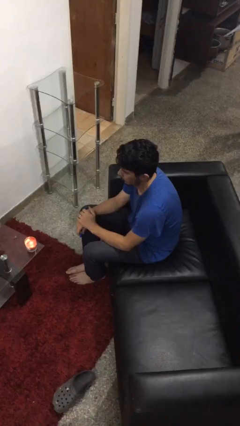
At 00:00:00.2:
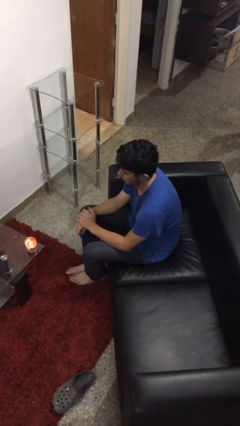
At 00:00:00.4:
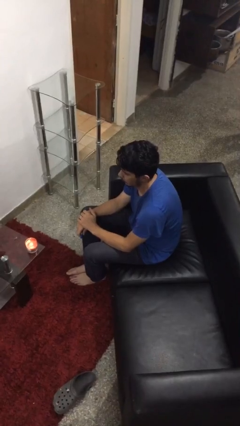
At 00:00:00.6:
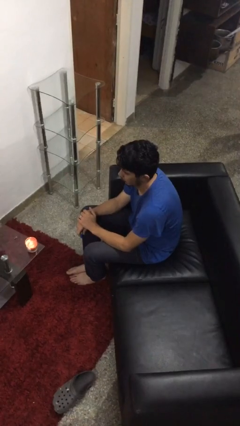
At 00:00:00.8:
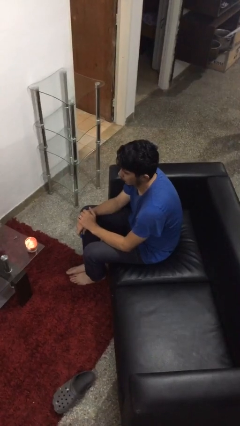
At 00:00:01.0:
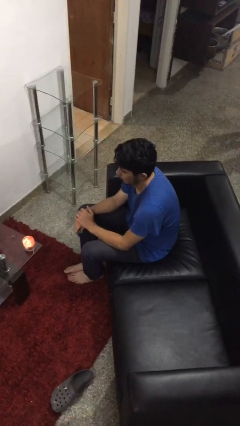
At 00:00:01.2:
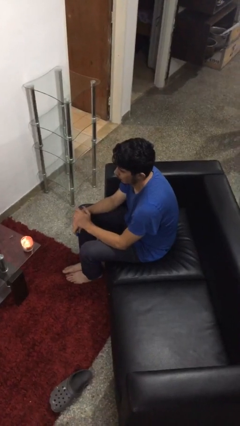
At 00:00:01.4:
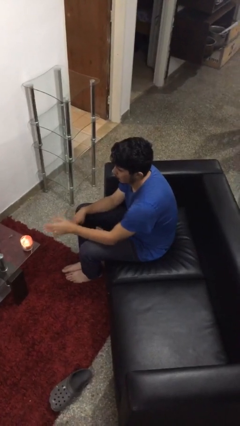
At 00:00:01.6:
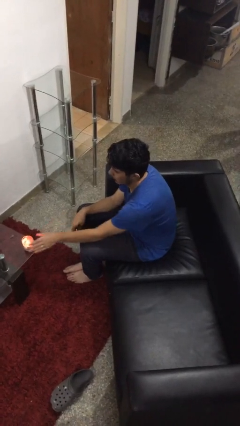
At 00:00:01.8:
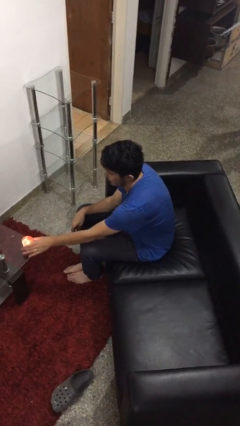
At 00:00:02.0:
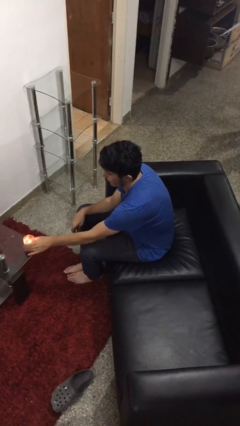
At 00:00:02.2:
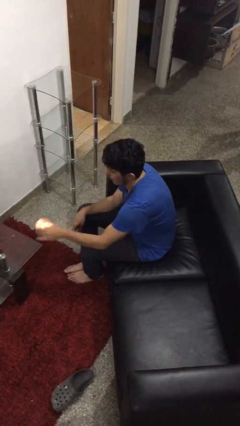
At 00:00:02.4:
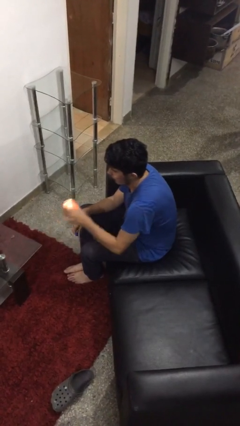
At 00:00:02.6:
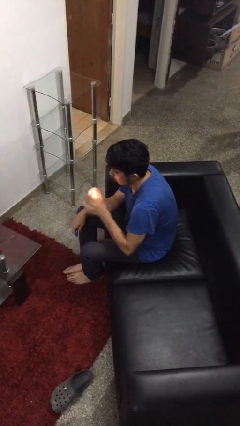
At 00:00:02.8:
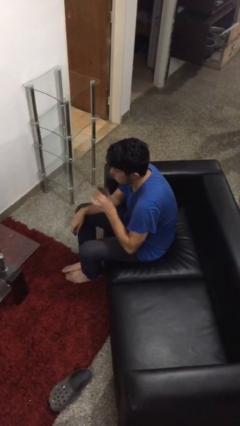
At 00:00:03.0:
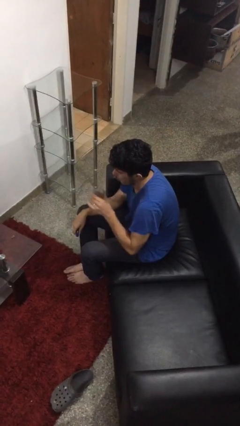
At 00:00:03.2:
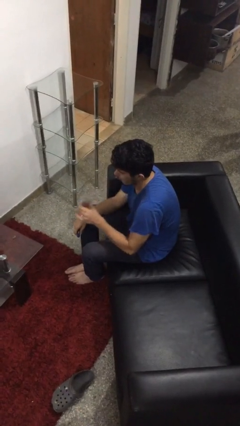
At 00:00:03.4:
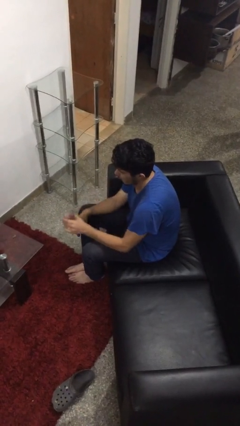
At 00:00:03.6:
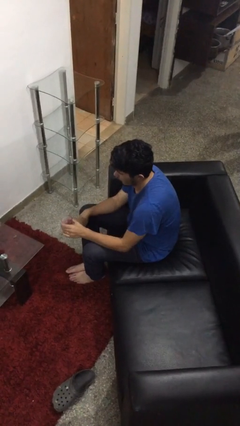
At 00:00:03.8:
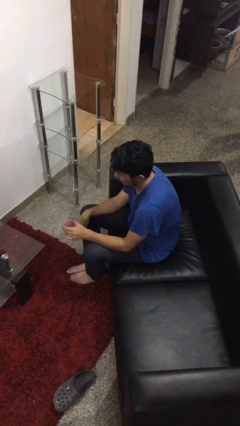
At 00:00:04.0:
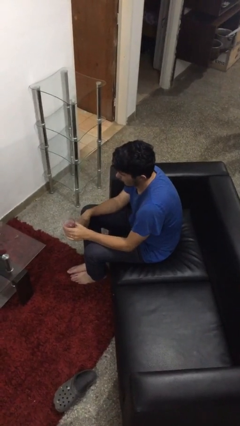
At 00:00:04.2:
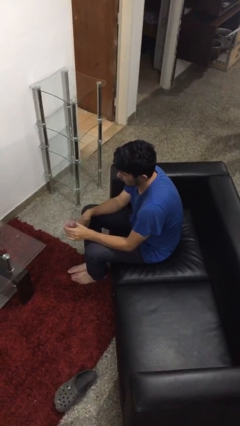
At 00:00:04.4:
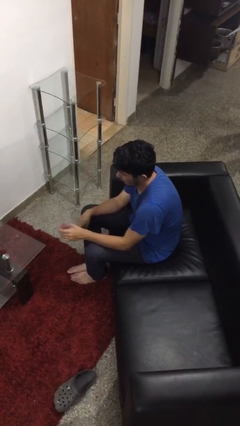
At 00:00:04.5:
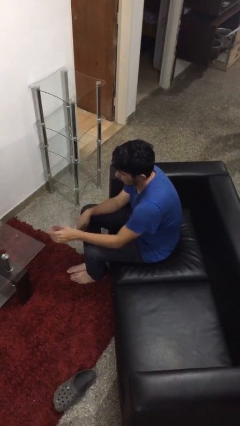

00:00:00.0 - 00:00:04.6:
person extinguishes candle

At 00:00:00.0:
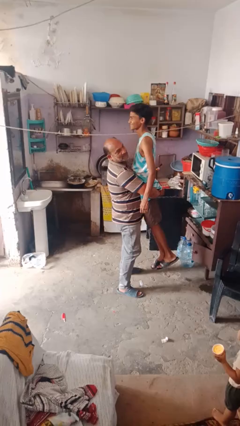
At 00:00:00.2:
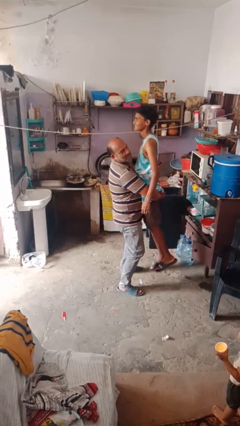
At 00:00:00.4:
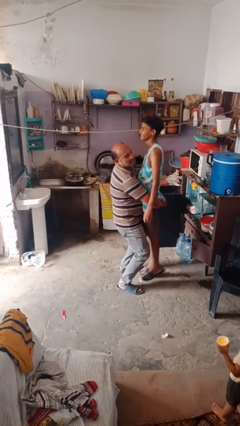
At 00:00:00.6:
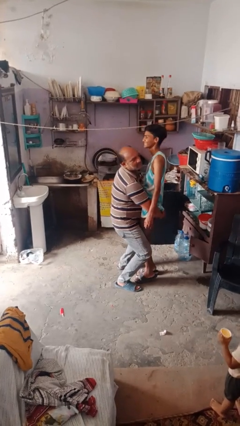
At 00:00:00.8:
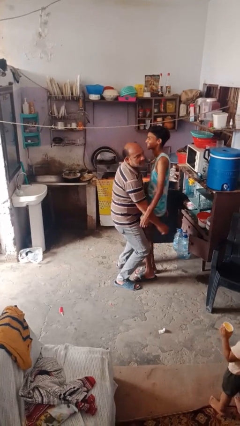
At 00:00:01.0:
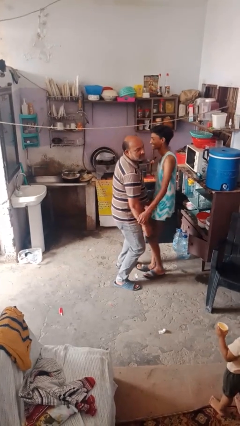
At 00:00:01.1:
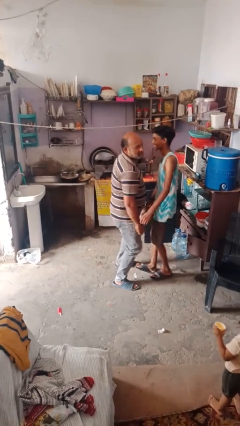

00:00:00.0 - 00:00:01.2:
person puts down person

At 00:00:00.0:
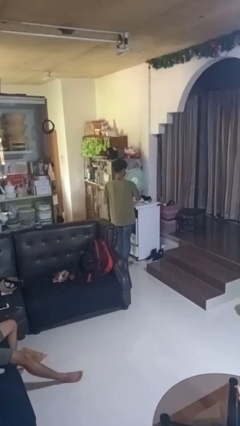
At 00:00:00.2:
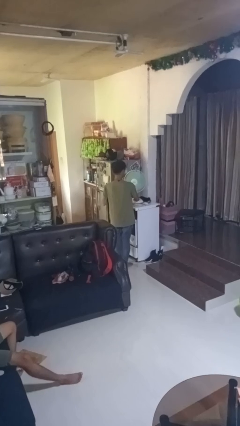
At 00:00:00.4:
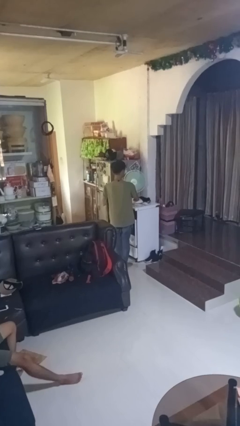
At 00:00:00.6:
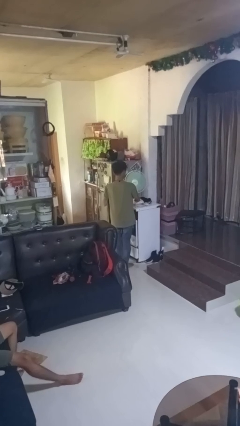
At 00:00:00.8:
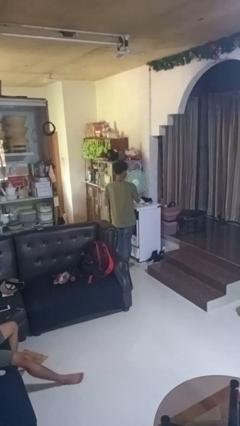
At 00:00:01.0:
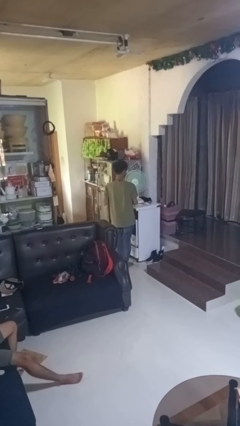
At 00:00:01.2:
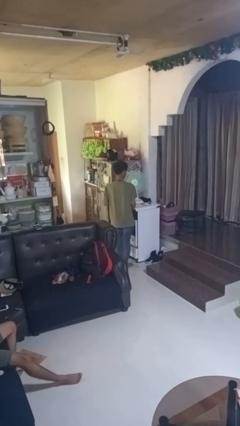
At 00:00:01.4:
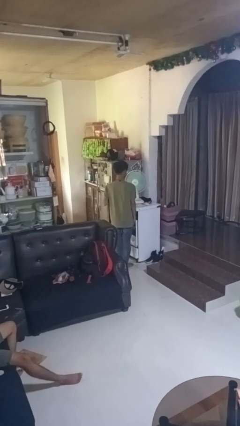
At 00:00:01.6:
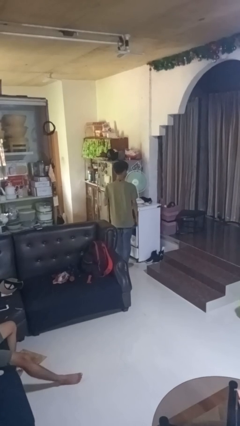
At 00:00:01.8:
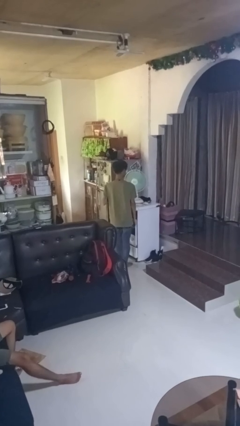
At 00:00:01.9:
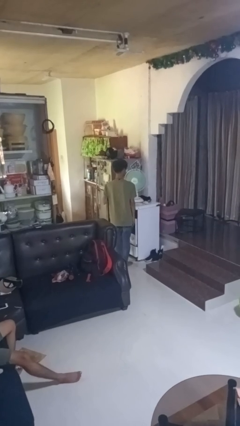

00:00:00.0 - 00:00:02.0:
person turns off fan

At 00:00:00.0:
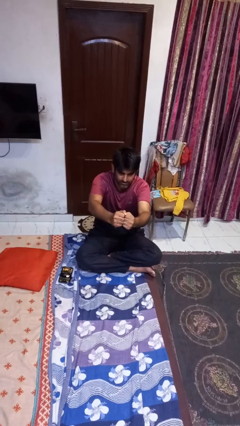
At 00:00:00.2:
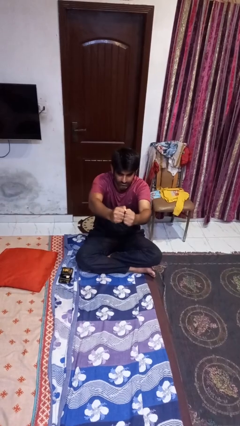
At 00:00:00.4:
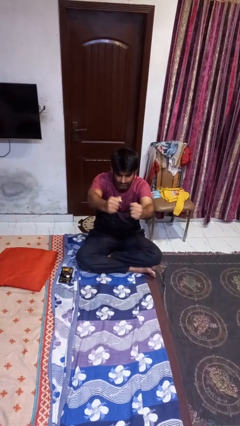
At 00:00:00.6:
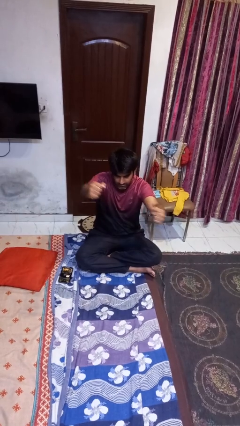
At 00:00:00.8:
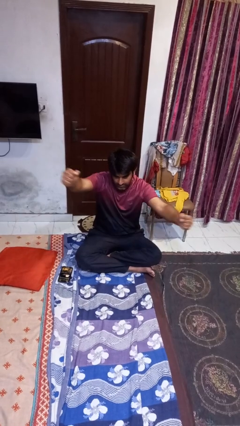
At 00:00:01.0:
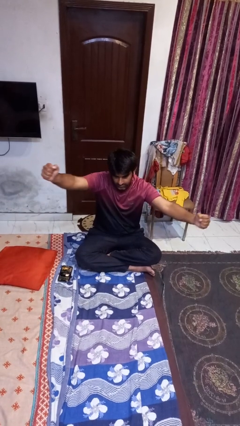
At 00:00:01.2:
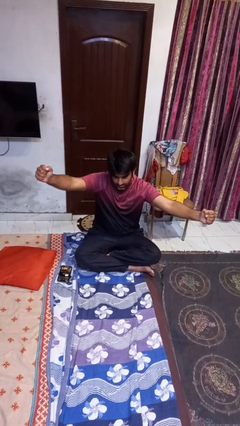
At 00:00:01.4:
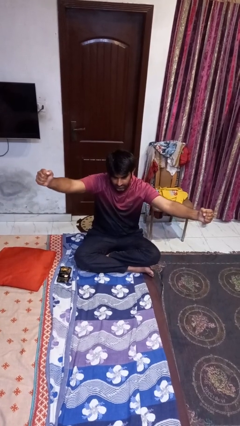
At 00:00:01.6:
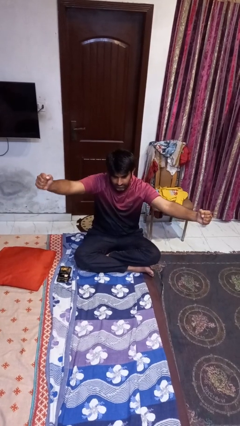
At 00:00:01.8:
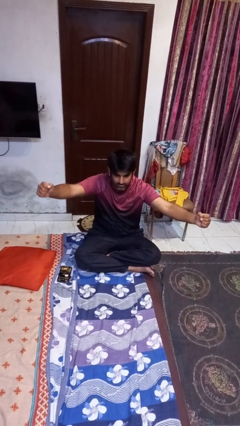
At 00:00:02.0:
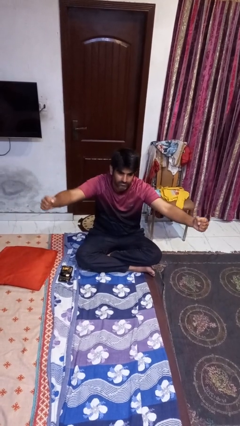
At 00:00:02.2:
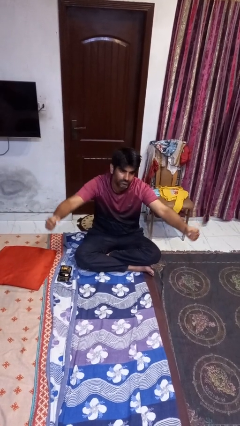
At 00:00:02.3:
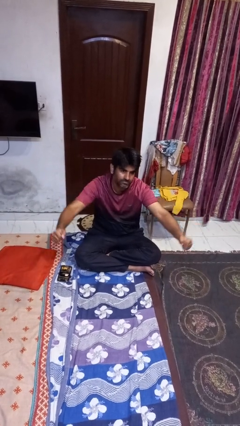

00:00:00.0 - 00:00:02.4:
person gestures zoom out

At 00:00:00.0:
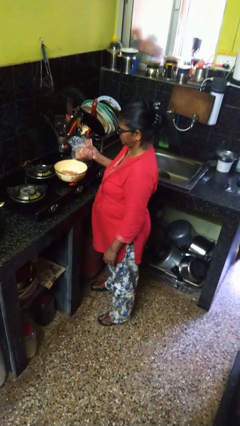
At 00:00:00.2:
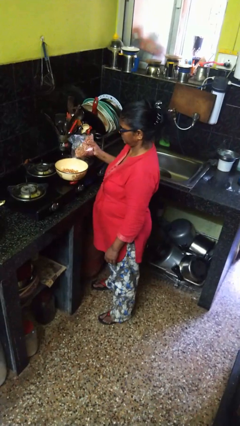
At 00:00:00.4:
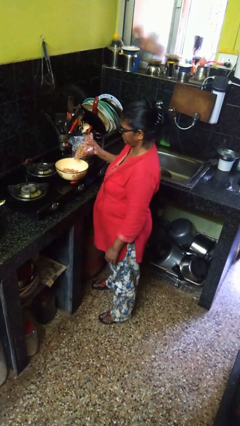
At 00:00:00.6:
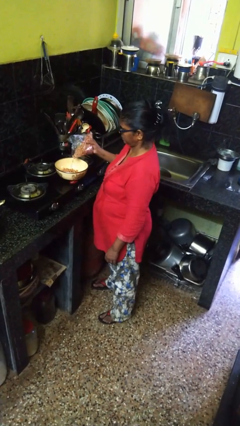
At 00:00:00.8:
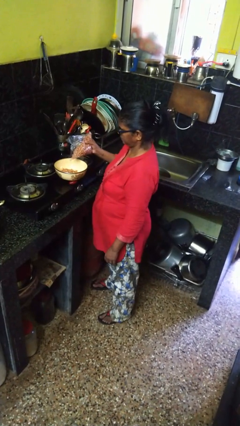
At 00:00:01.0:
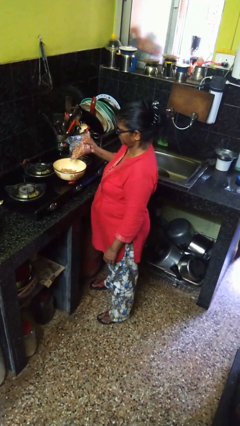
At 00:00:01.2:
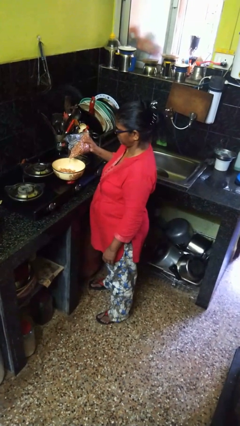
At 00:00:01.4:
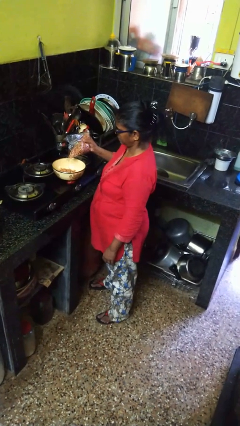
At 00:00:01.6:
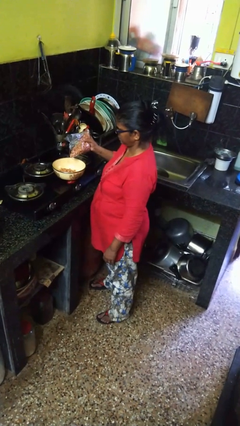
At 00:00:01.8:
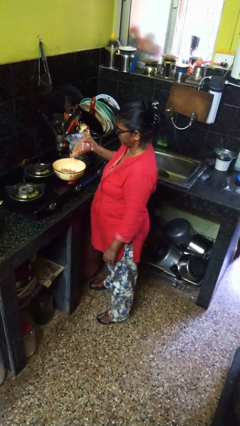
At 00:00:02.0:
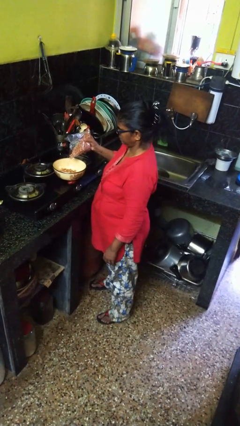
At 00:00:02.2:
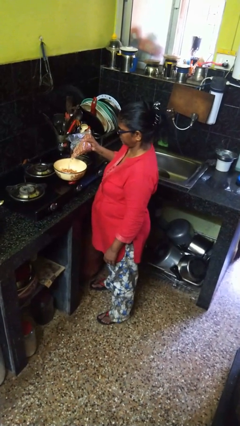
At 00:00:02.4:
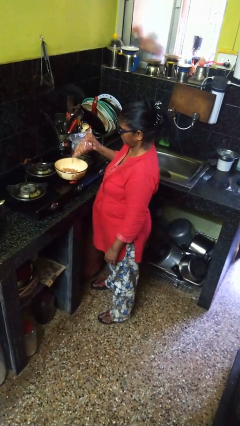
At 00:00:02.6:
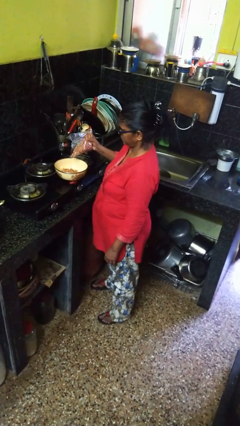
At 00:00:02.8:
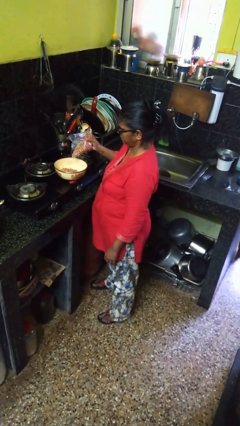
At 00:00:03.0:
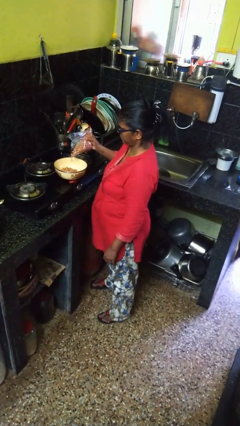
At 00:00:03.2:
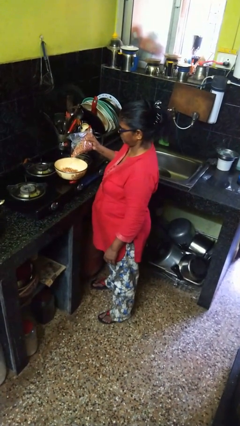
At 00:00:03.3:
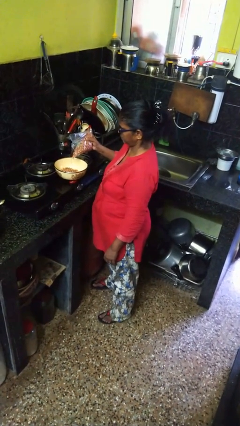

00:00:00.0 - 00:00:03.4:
person pours into bowl

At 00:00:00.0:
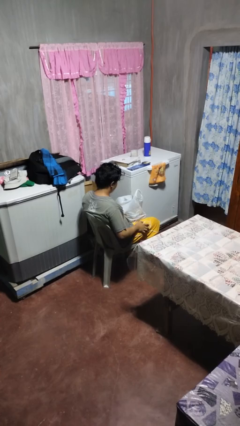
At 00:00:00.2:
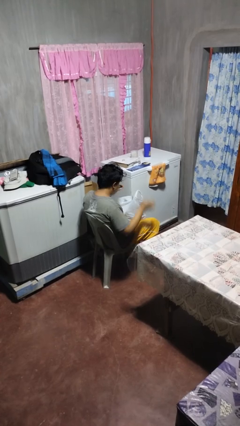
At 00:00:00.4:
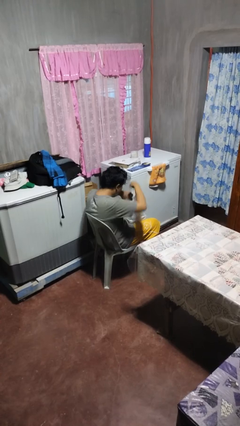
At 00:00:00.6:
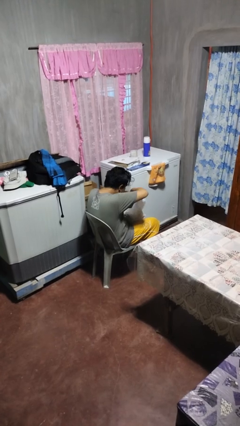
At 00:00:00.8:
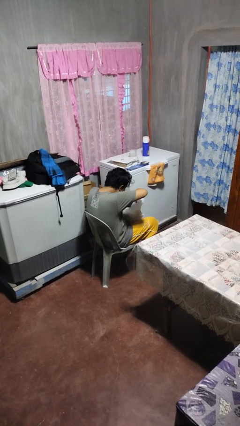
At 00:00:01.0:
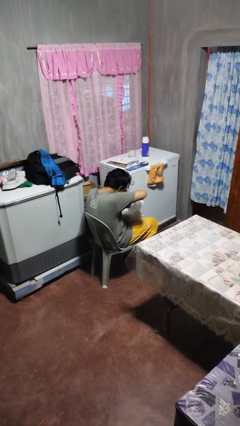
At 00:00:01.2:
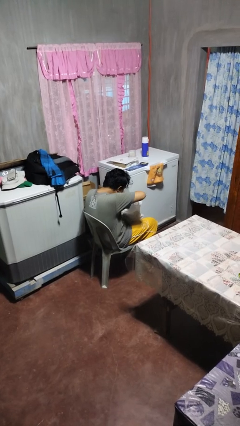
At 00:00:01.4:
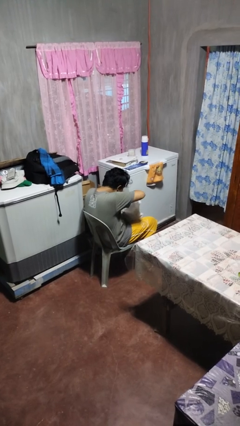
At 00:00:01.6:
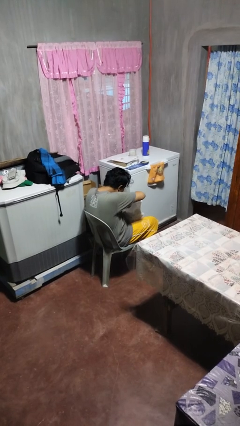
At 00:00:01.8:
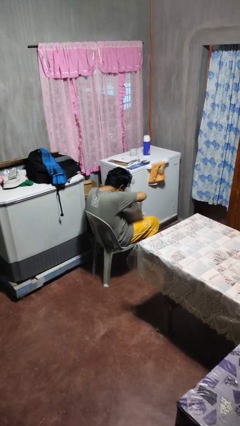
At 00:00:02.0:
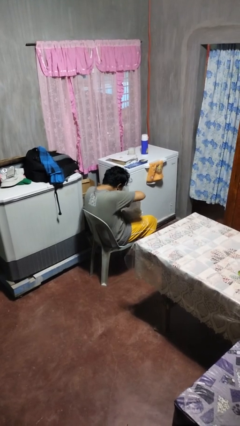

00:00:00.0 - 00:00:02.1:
person searches in bag

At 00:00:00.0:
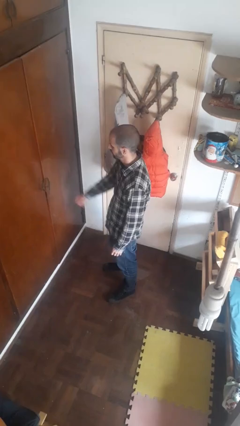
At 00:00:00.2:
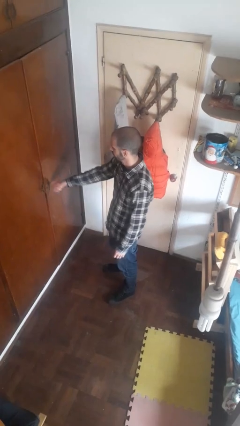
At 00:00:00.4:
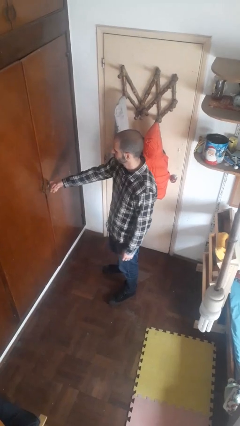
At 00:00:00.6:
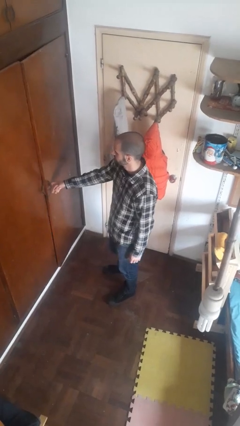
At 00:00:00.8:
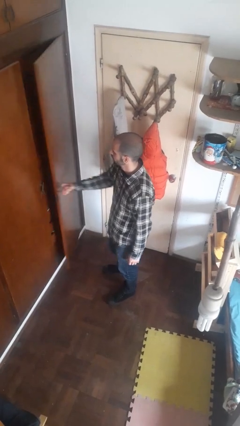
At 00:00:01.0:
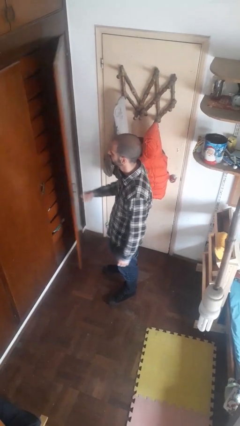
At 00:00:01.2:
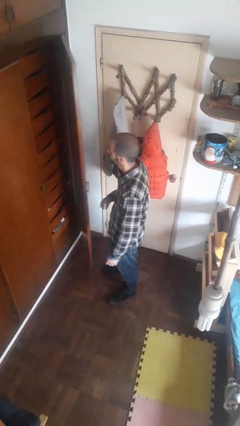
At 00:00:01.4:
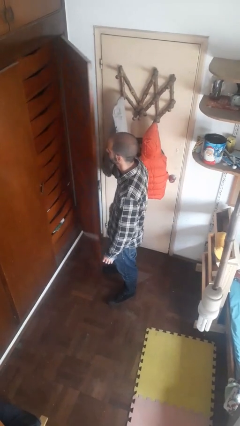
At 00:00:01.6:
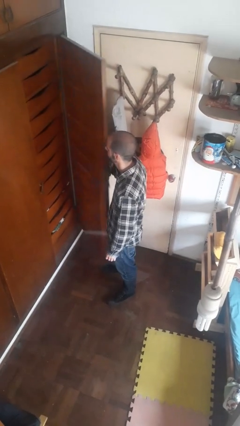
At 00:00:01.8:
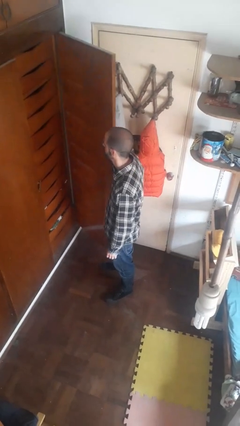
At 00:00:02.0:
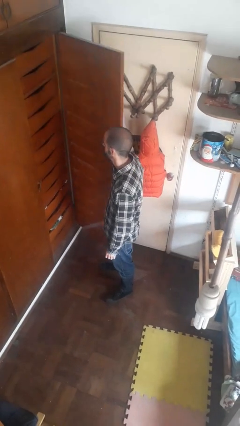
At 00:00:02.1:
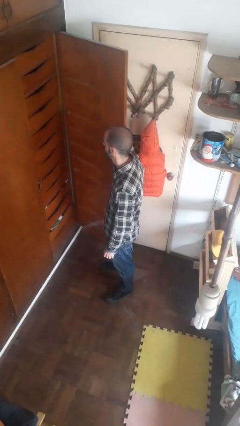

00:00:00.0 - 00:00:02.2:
person opens closet door
